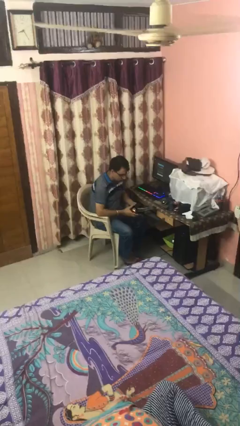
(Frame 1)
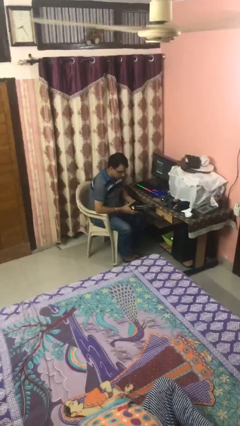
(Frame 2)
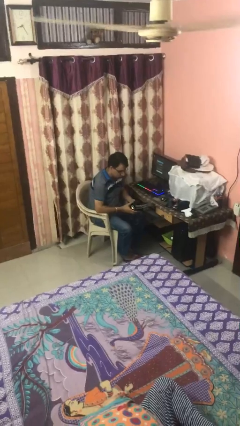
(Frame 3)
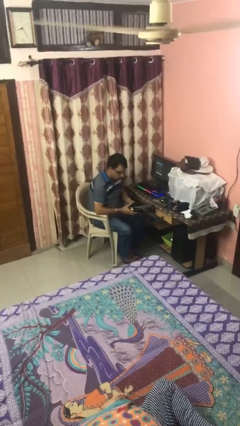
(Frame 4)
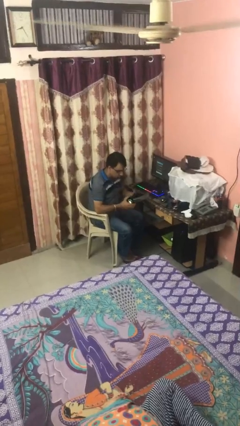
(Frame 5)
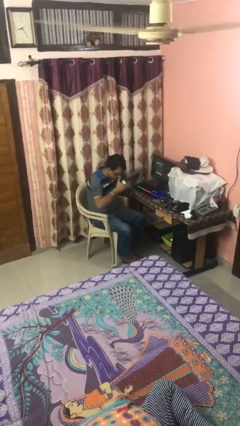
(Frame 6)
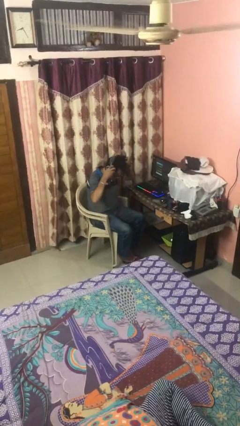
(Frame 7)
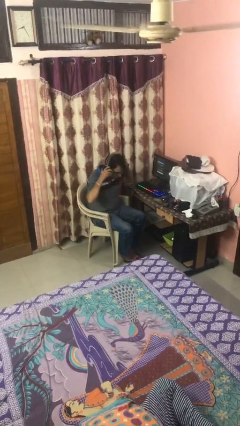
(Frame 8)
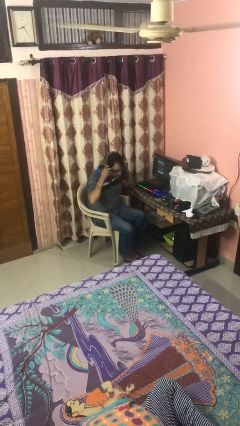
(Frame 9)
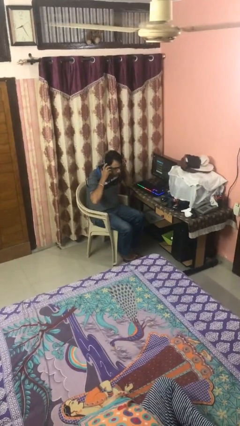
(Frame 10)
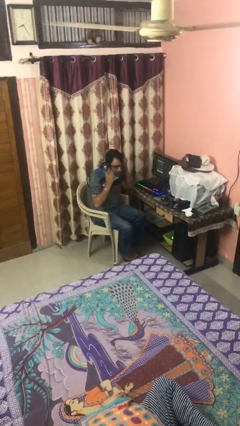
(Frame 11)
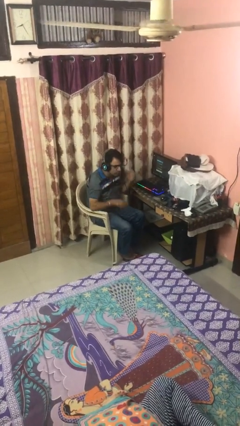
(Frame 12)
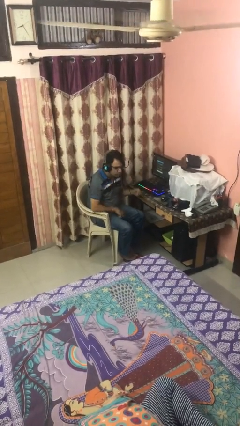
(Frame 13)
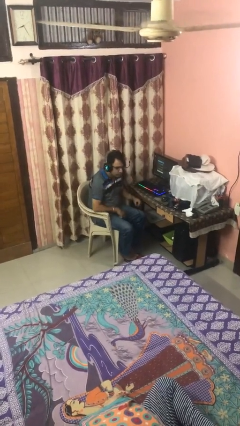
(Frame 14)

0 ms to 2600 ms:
person puts on headphones

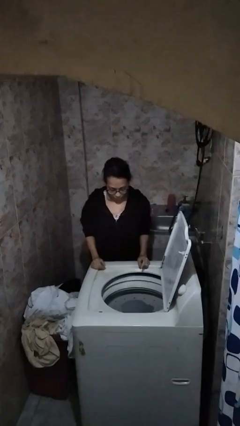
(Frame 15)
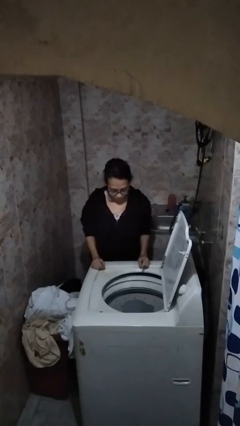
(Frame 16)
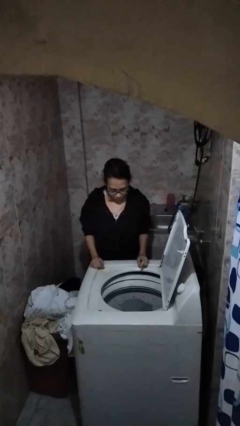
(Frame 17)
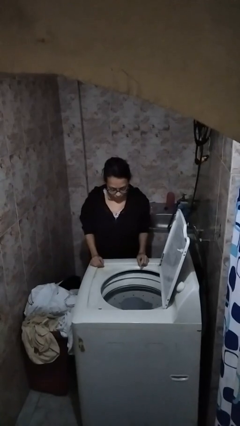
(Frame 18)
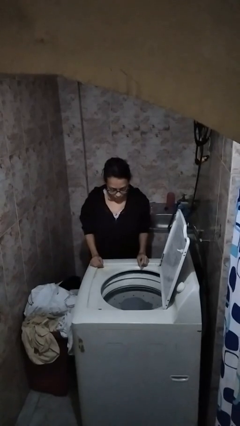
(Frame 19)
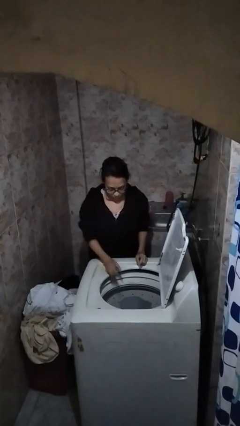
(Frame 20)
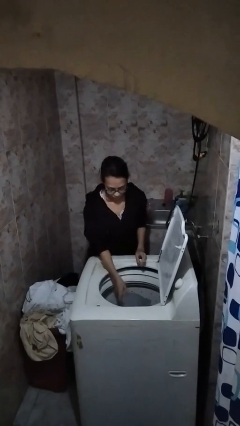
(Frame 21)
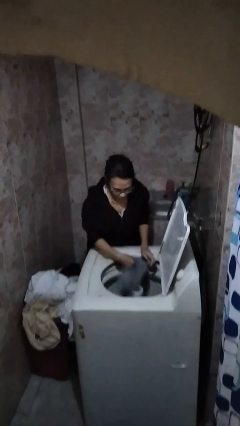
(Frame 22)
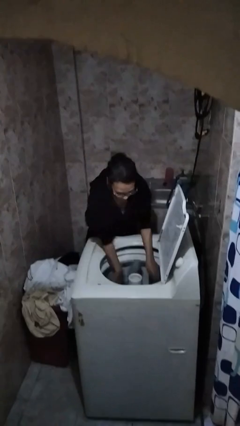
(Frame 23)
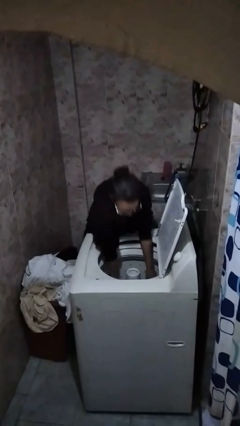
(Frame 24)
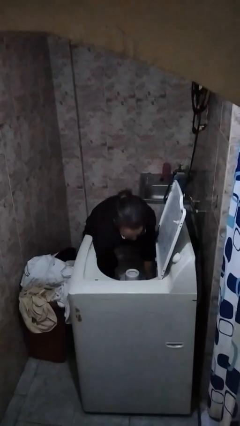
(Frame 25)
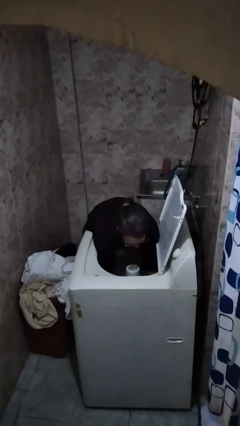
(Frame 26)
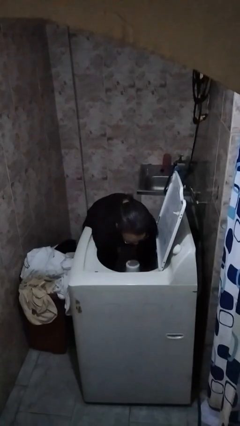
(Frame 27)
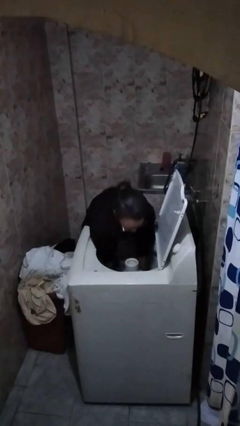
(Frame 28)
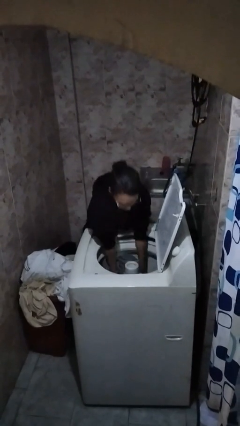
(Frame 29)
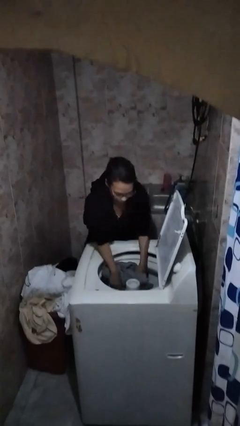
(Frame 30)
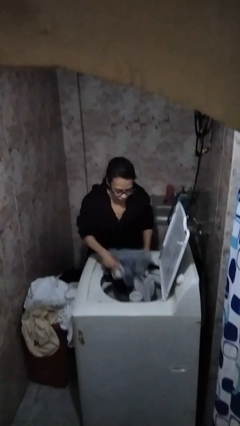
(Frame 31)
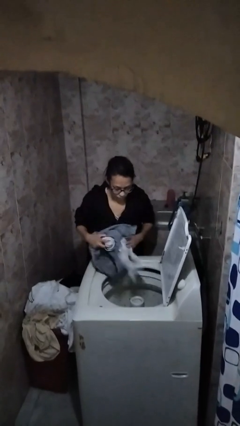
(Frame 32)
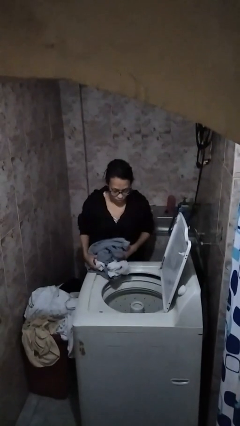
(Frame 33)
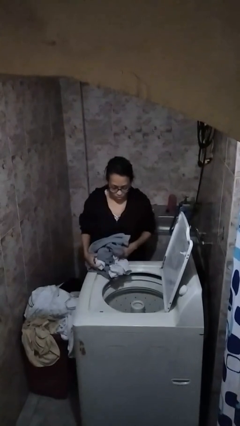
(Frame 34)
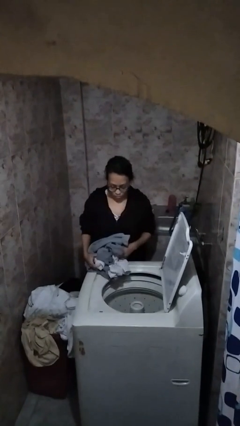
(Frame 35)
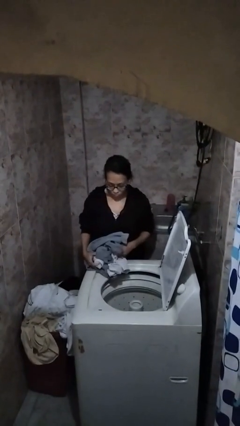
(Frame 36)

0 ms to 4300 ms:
person unloads dryer

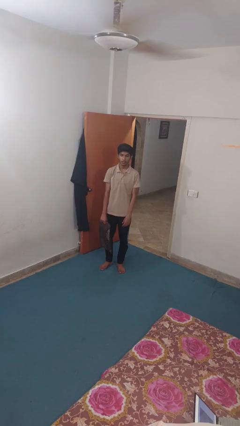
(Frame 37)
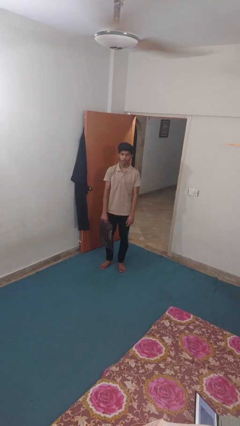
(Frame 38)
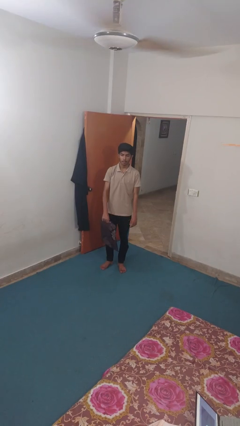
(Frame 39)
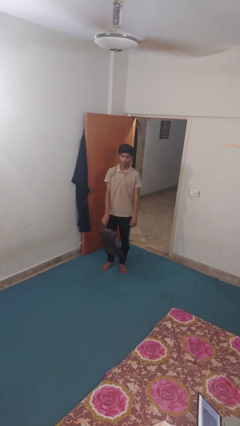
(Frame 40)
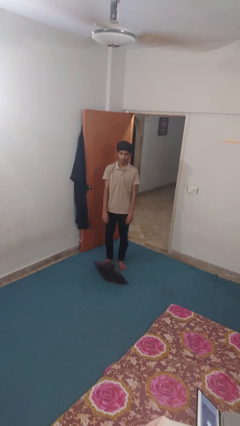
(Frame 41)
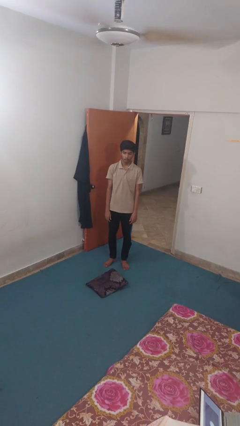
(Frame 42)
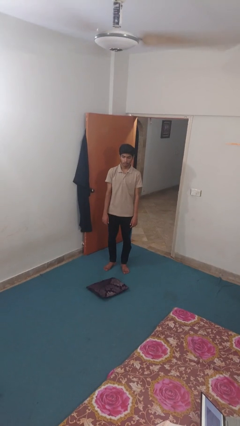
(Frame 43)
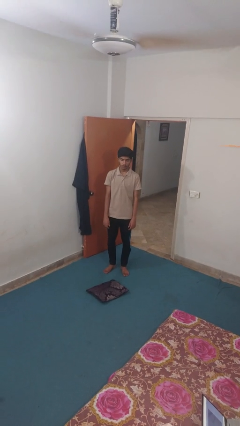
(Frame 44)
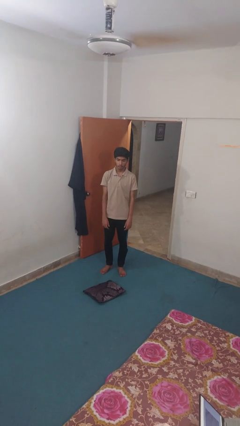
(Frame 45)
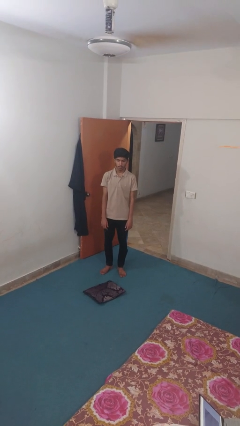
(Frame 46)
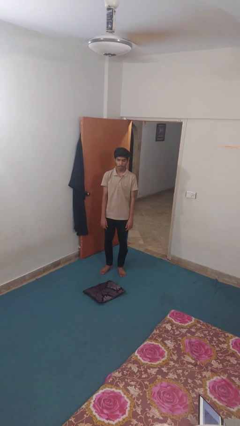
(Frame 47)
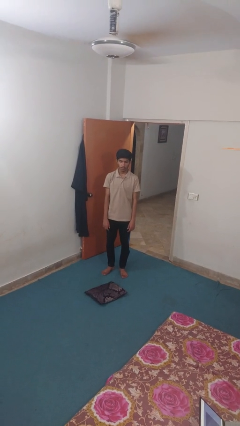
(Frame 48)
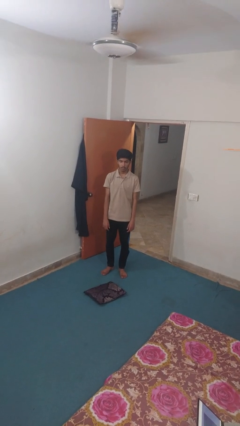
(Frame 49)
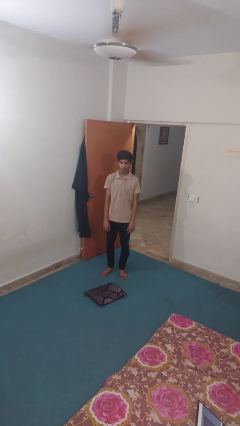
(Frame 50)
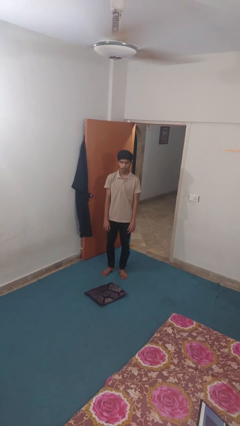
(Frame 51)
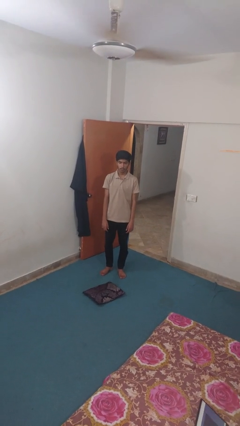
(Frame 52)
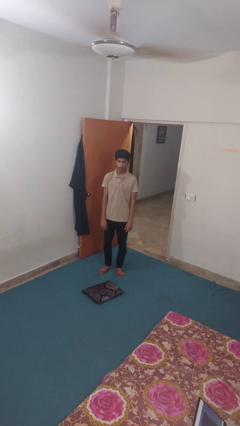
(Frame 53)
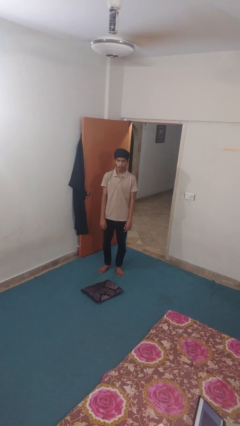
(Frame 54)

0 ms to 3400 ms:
person drops object

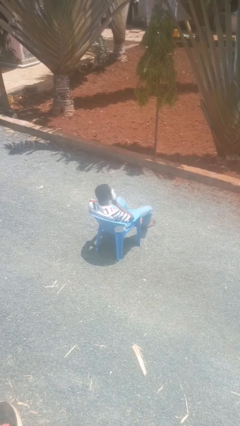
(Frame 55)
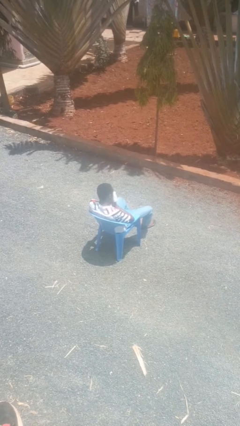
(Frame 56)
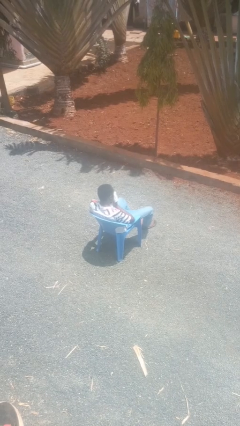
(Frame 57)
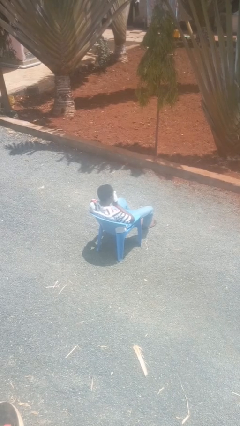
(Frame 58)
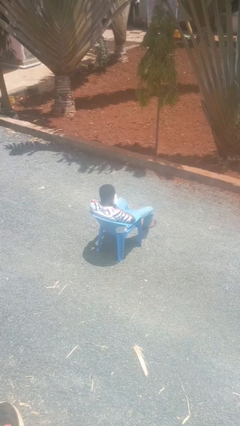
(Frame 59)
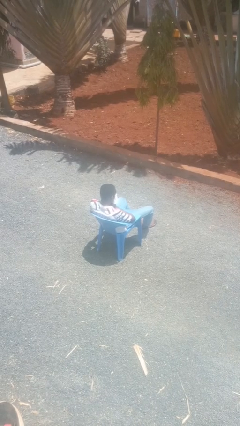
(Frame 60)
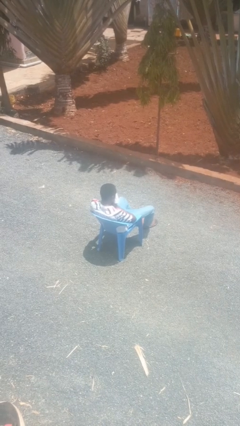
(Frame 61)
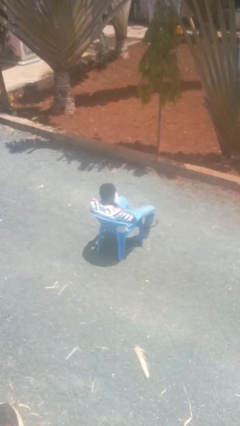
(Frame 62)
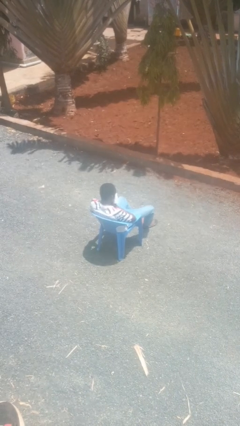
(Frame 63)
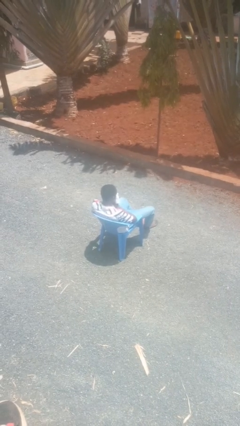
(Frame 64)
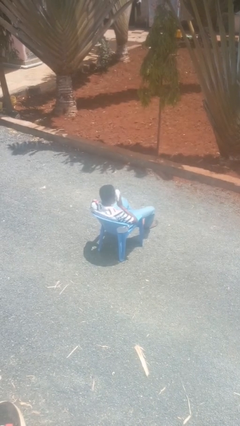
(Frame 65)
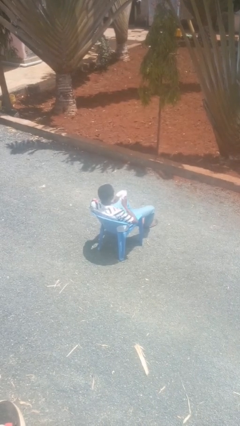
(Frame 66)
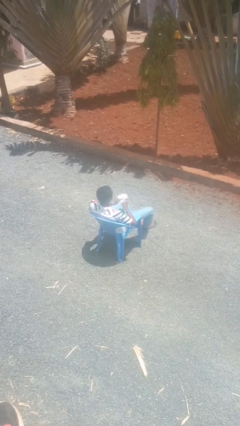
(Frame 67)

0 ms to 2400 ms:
person blows nose

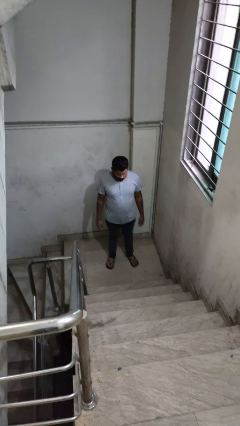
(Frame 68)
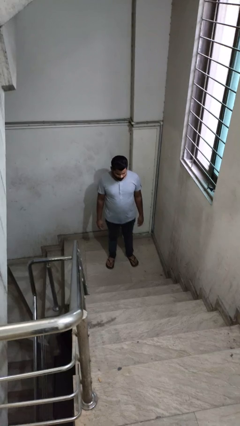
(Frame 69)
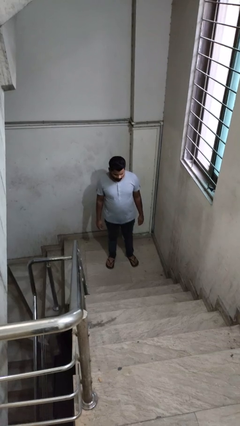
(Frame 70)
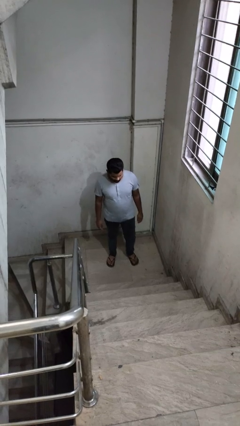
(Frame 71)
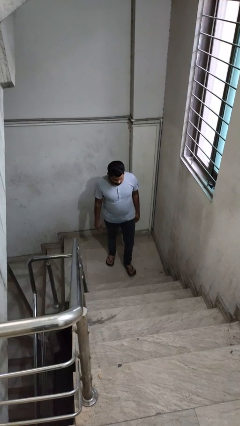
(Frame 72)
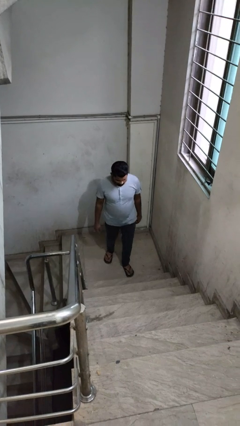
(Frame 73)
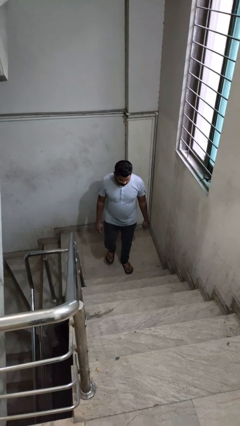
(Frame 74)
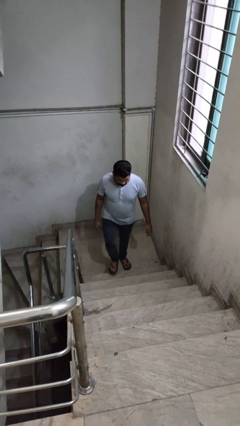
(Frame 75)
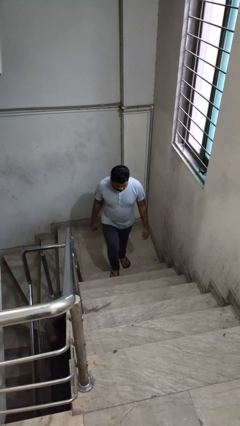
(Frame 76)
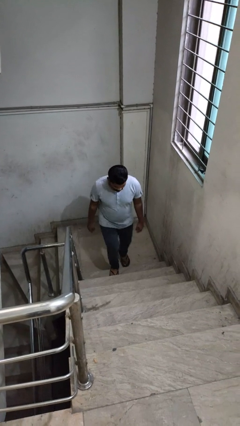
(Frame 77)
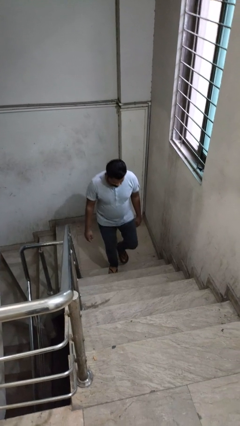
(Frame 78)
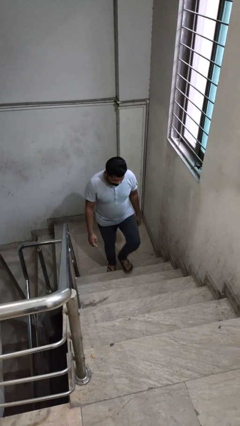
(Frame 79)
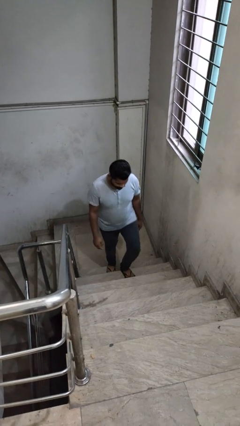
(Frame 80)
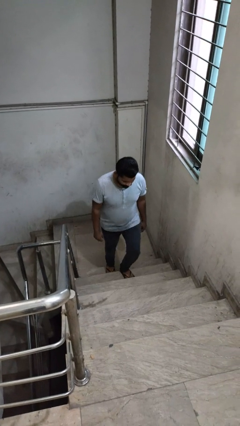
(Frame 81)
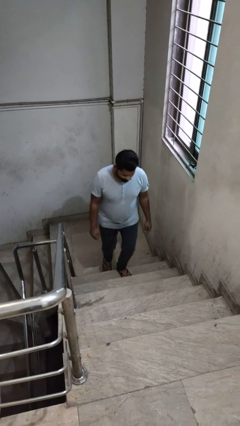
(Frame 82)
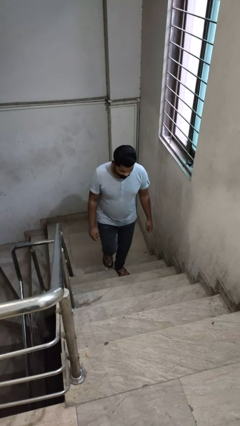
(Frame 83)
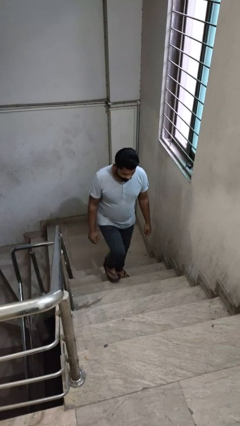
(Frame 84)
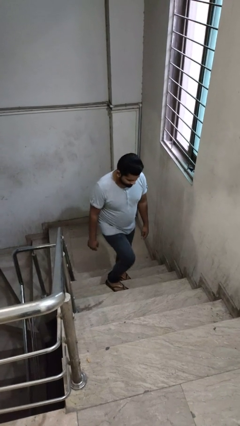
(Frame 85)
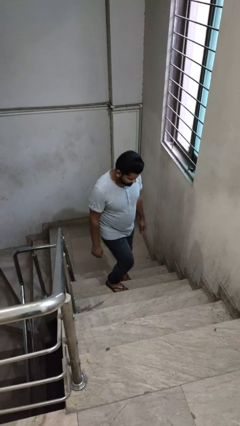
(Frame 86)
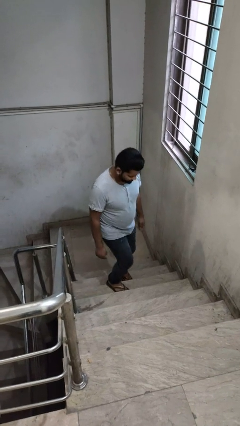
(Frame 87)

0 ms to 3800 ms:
person climbs up stairs

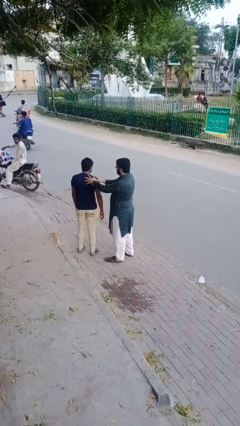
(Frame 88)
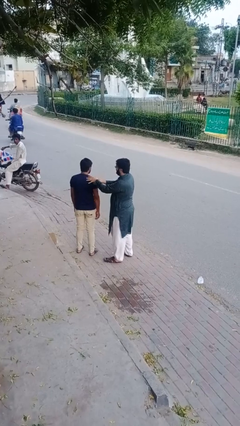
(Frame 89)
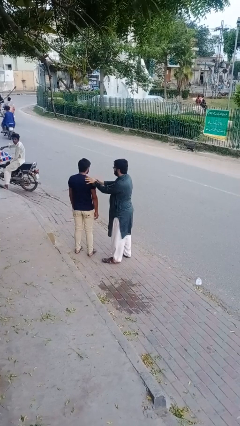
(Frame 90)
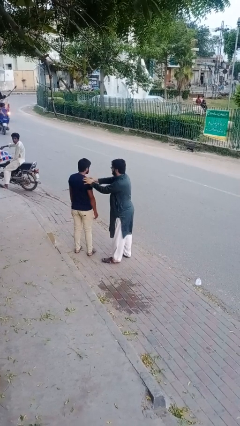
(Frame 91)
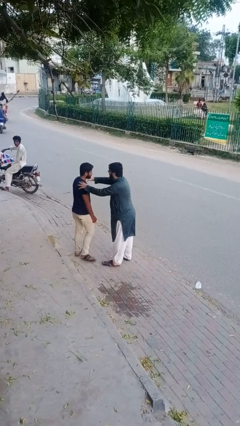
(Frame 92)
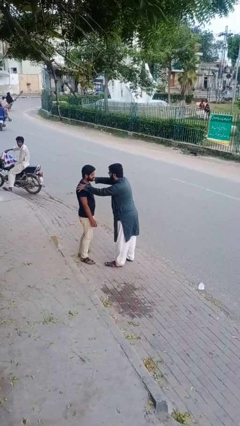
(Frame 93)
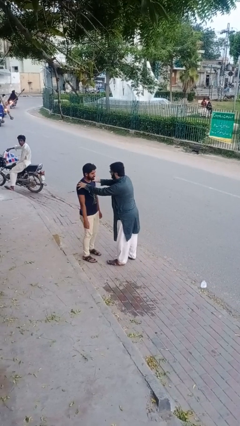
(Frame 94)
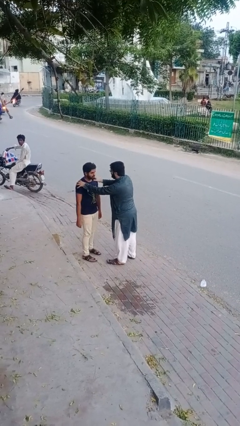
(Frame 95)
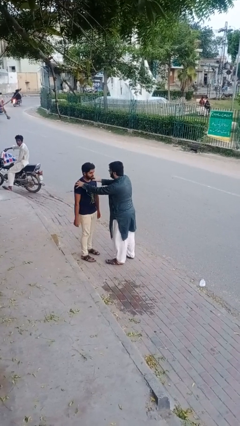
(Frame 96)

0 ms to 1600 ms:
person spins person around
